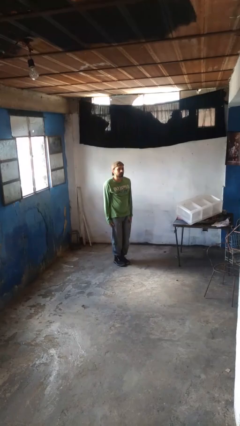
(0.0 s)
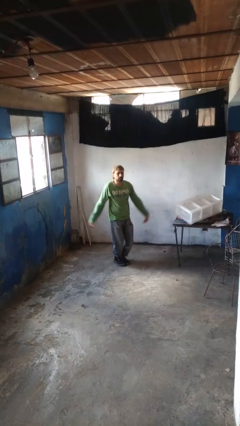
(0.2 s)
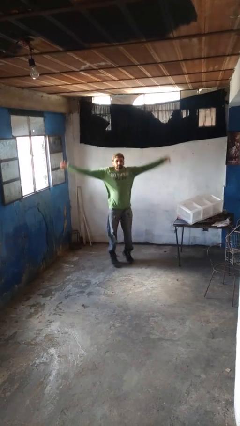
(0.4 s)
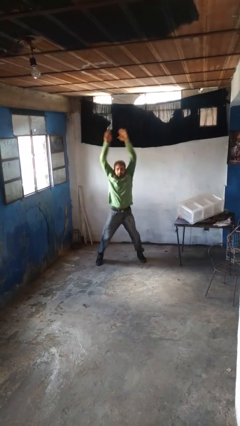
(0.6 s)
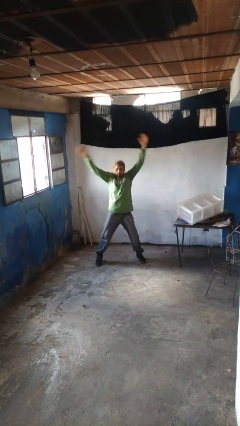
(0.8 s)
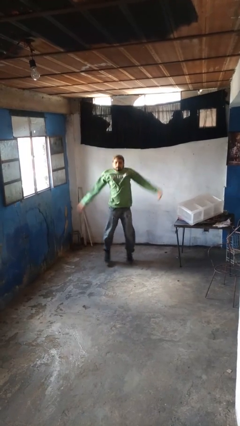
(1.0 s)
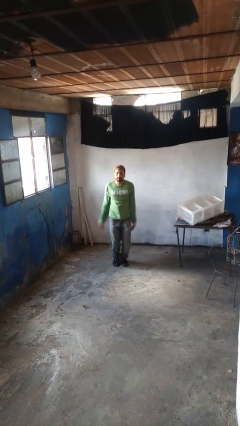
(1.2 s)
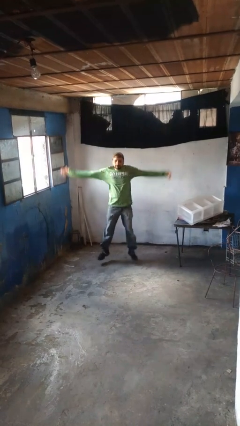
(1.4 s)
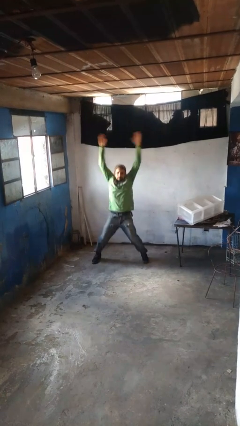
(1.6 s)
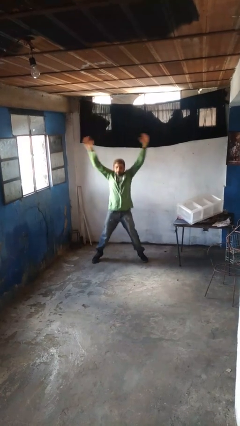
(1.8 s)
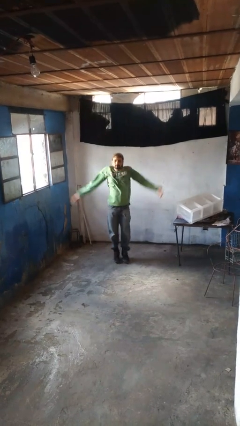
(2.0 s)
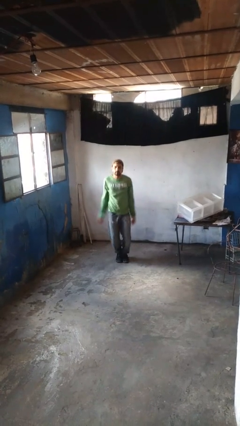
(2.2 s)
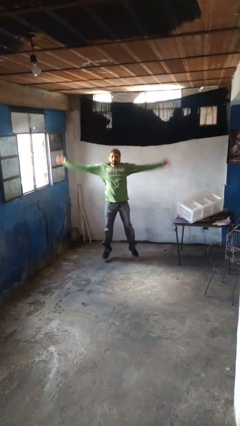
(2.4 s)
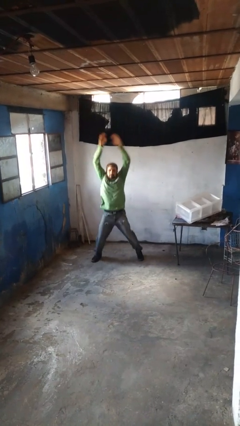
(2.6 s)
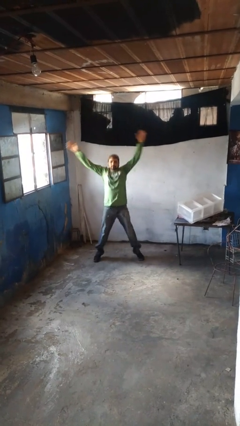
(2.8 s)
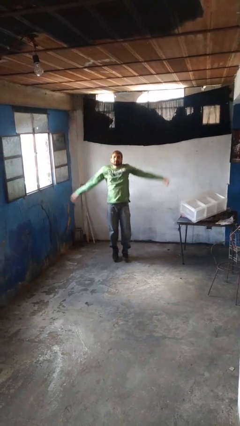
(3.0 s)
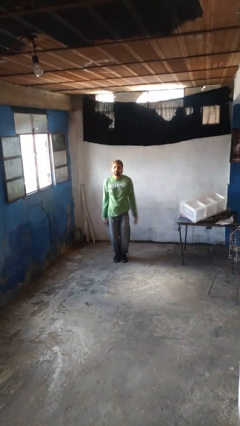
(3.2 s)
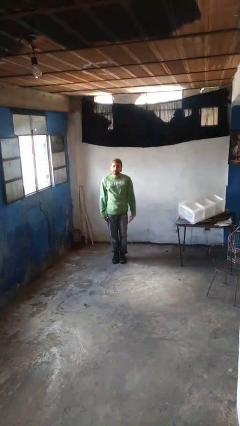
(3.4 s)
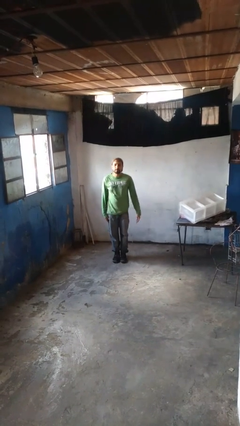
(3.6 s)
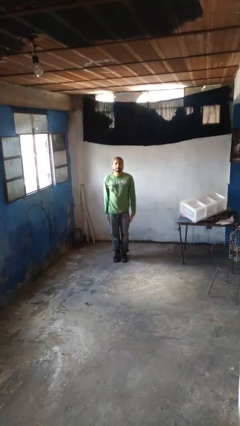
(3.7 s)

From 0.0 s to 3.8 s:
person exercises with jumping jacks

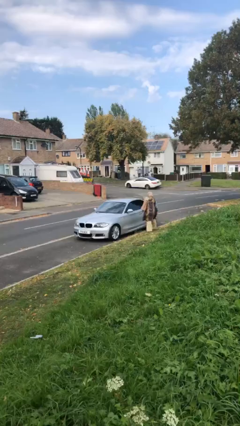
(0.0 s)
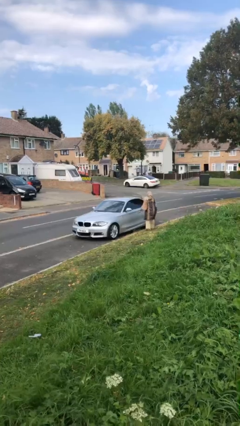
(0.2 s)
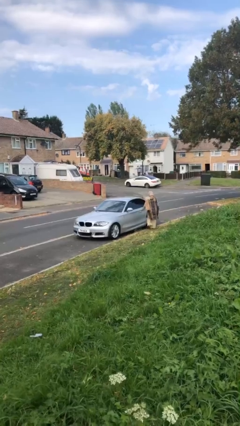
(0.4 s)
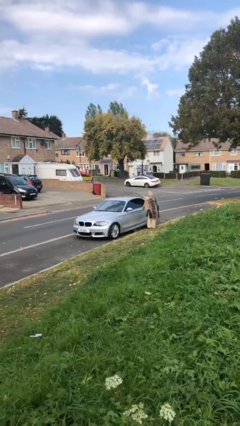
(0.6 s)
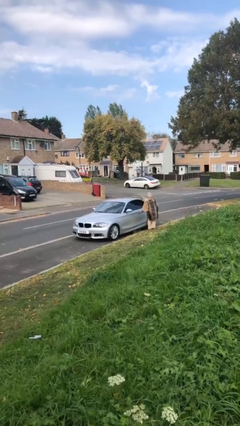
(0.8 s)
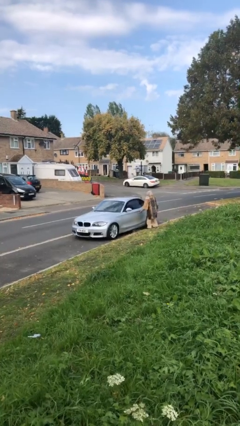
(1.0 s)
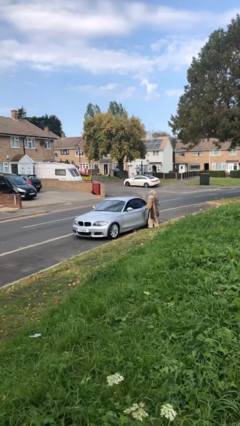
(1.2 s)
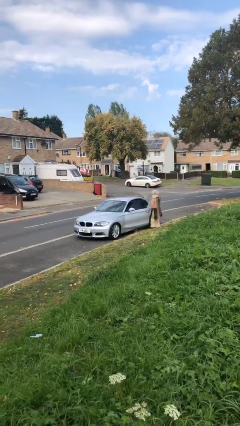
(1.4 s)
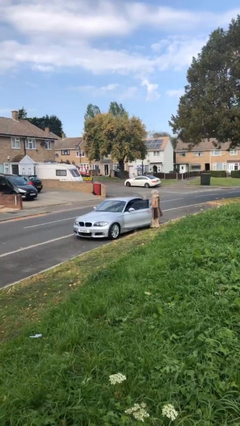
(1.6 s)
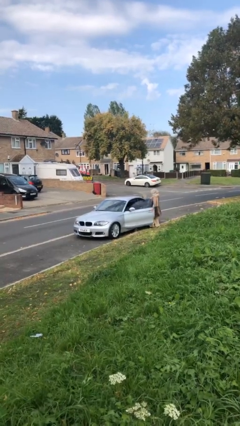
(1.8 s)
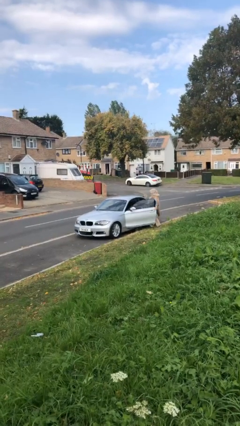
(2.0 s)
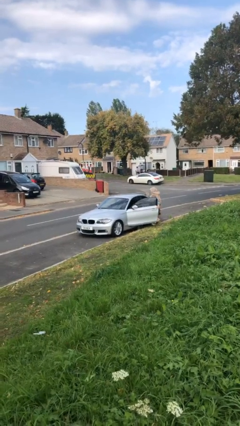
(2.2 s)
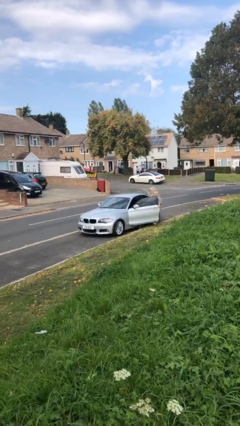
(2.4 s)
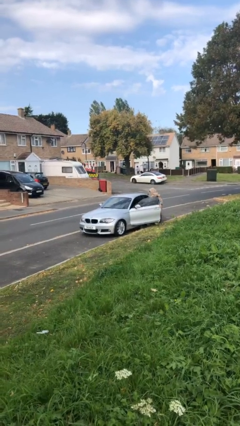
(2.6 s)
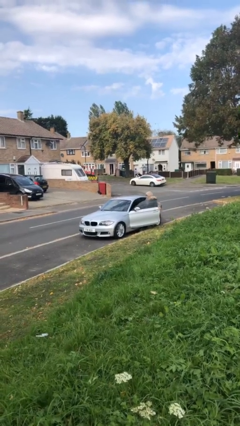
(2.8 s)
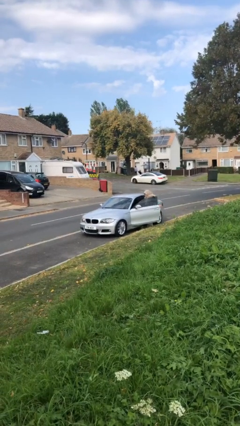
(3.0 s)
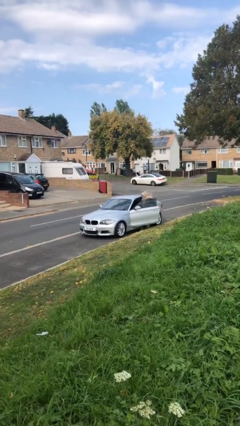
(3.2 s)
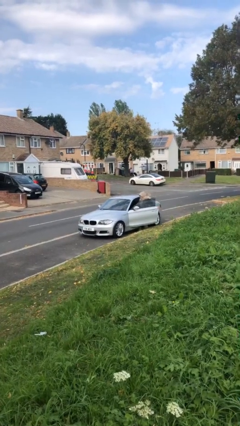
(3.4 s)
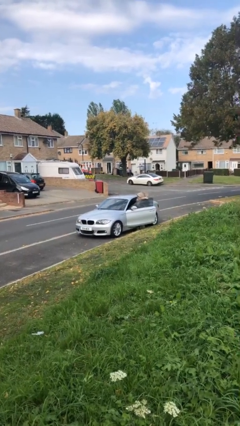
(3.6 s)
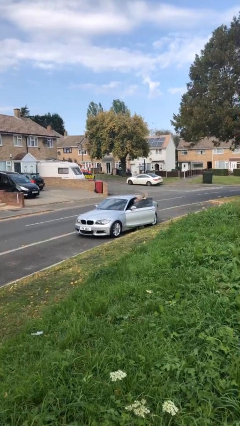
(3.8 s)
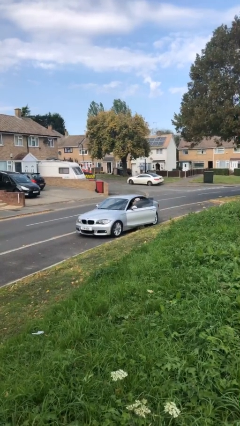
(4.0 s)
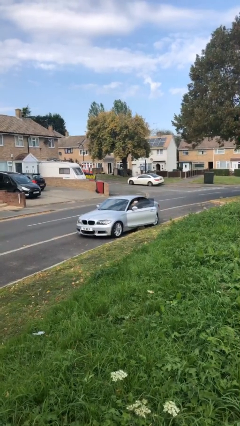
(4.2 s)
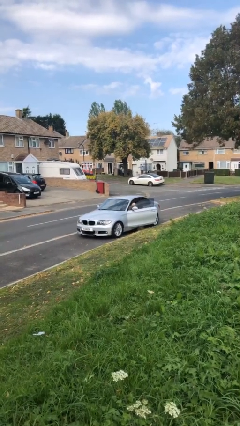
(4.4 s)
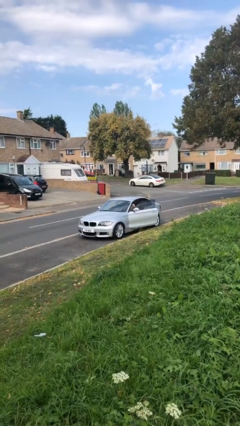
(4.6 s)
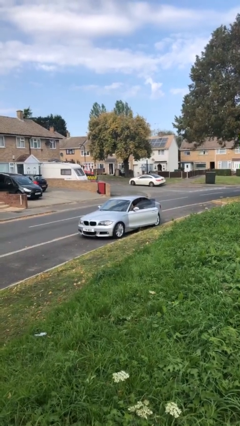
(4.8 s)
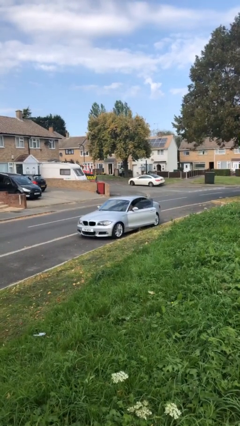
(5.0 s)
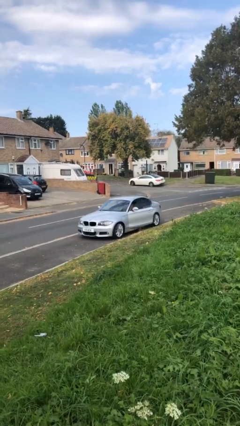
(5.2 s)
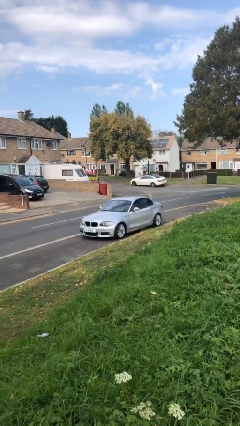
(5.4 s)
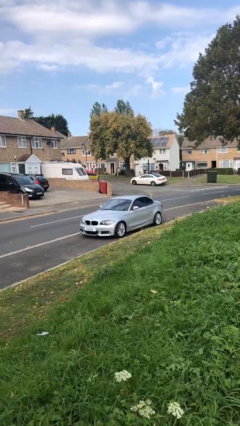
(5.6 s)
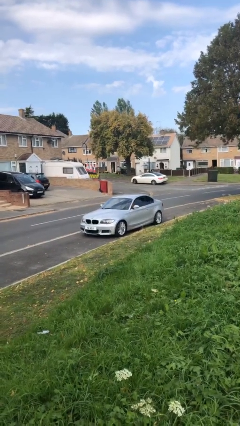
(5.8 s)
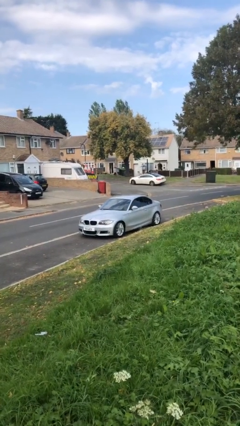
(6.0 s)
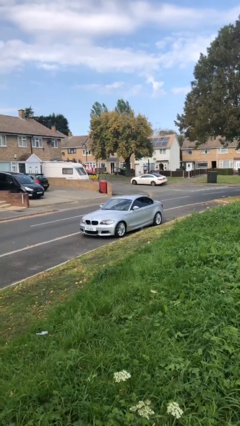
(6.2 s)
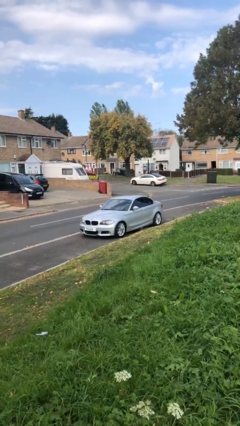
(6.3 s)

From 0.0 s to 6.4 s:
car picks up person

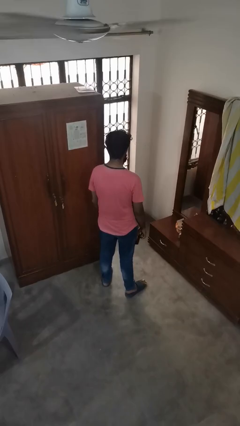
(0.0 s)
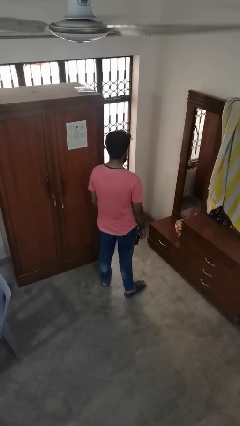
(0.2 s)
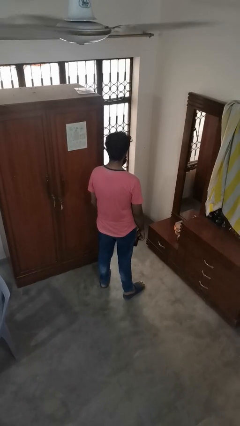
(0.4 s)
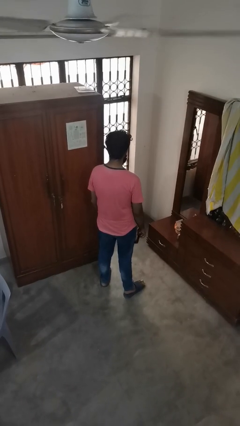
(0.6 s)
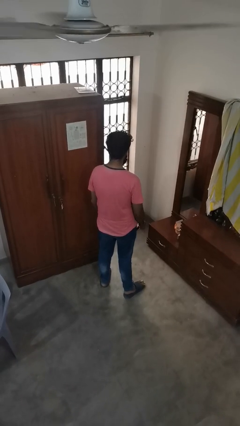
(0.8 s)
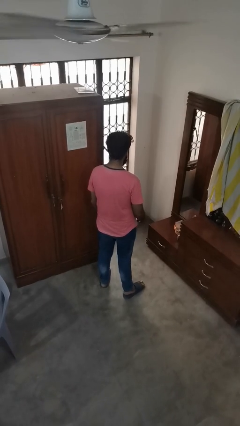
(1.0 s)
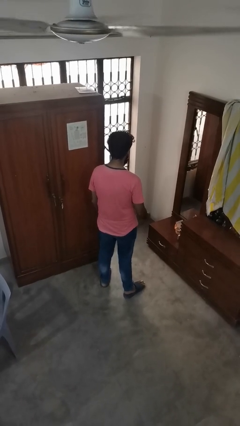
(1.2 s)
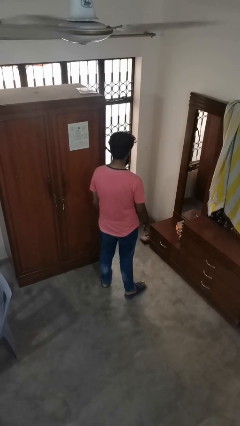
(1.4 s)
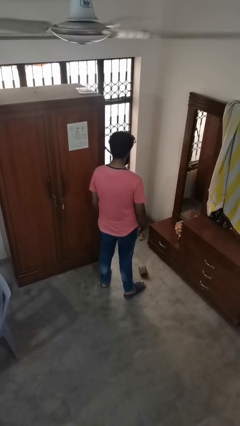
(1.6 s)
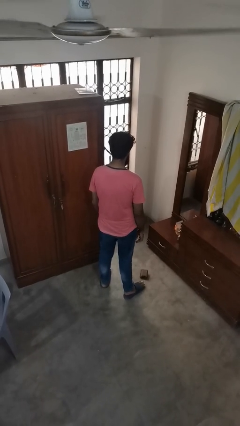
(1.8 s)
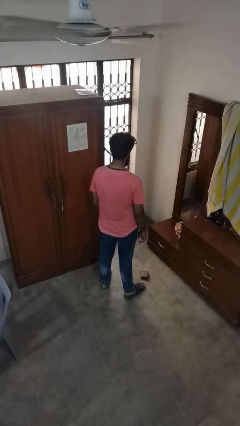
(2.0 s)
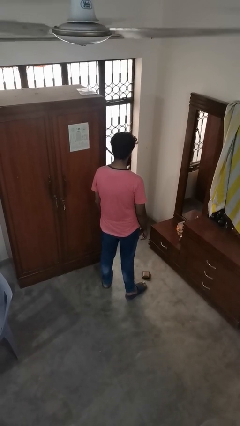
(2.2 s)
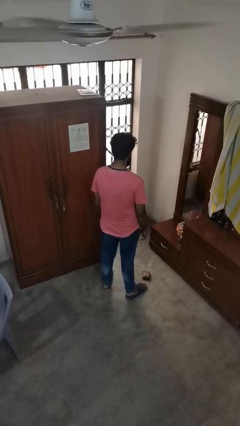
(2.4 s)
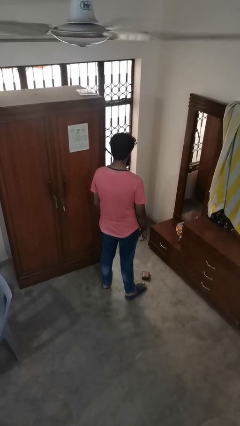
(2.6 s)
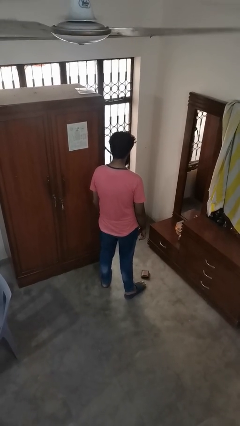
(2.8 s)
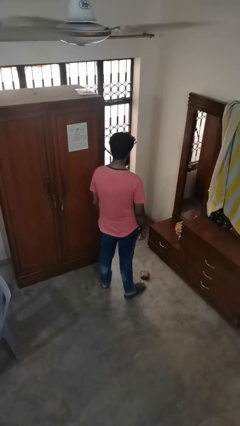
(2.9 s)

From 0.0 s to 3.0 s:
person throws object to ground

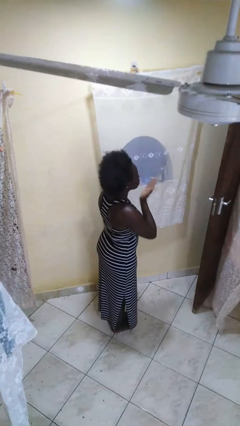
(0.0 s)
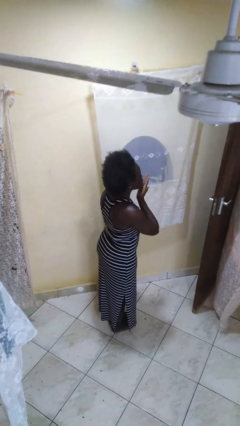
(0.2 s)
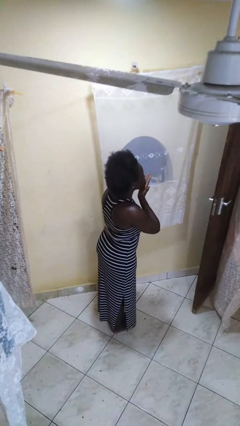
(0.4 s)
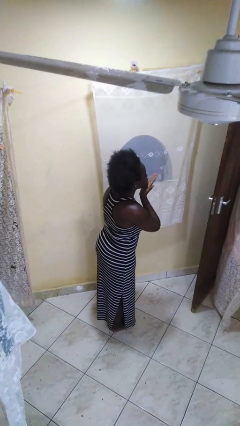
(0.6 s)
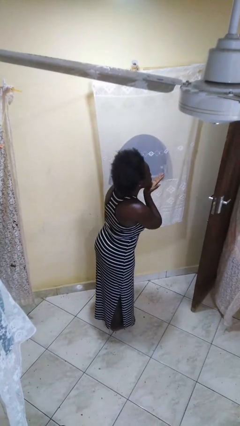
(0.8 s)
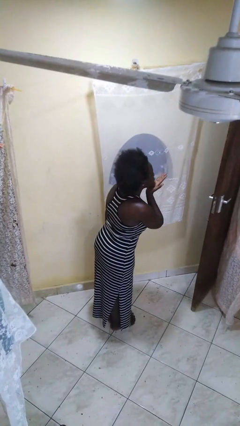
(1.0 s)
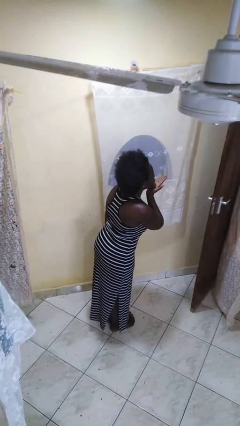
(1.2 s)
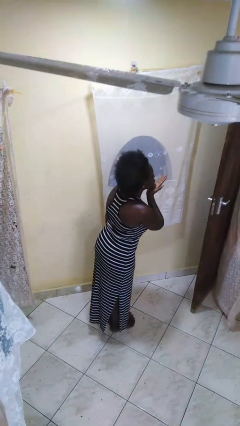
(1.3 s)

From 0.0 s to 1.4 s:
person gestures blow kiss

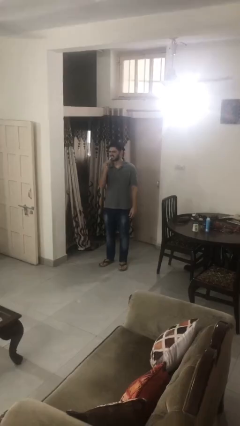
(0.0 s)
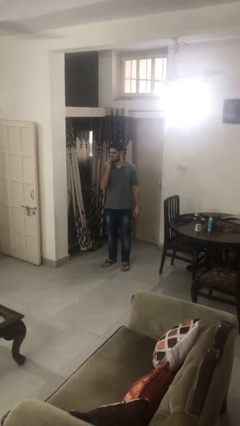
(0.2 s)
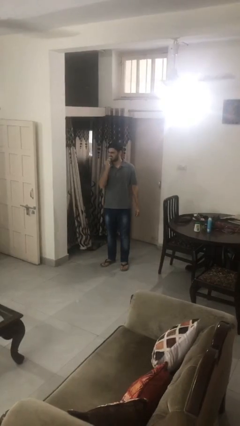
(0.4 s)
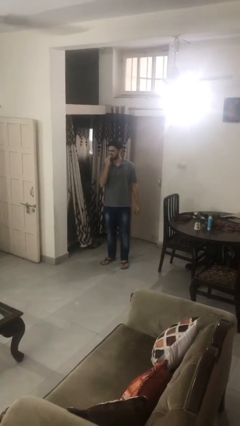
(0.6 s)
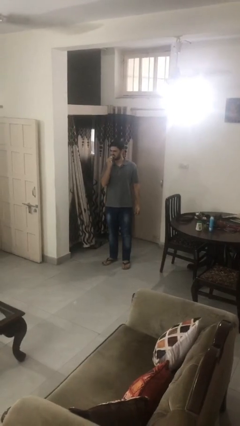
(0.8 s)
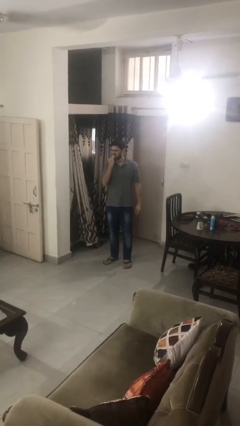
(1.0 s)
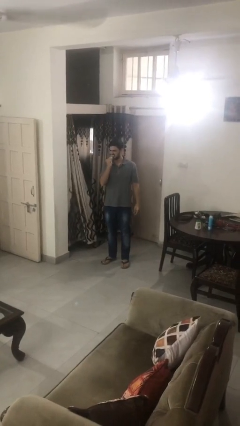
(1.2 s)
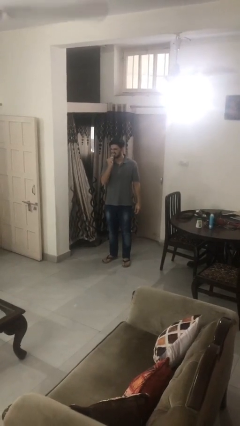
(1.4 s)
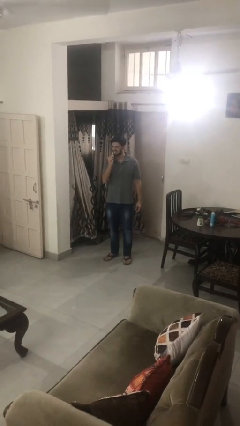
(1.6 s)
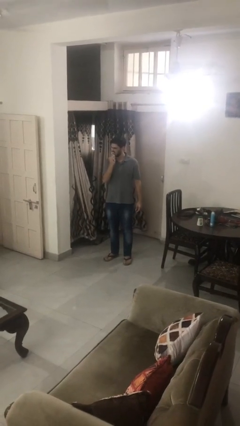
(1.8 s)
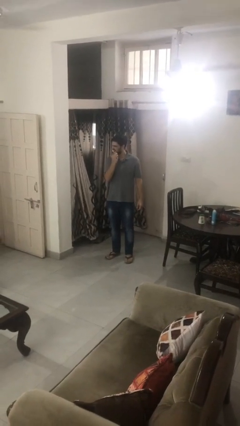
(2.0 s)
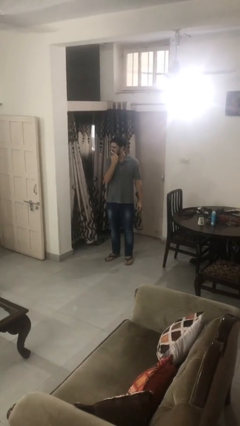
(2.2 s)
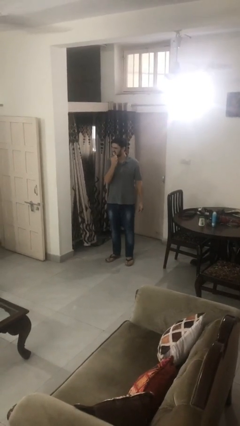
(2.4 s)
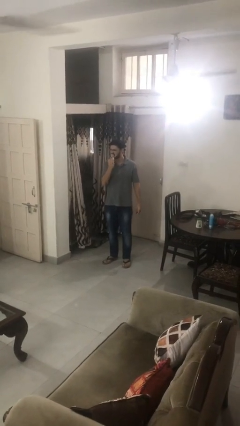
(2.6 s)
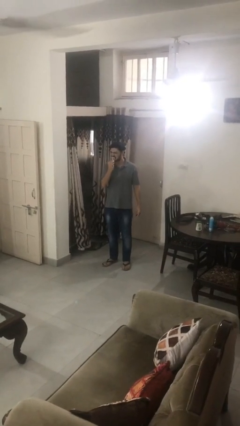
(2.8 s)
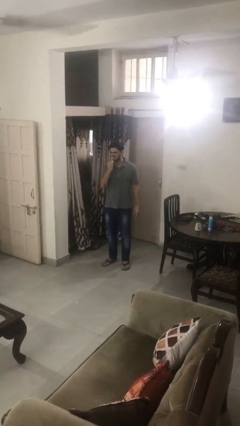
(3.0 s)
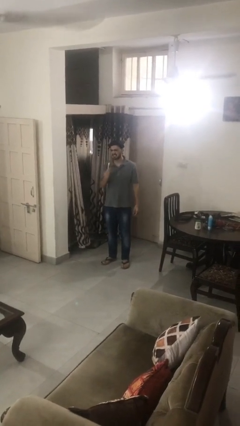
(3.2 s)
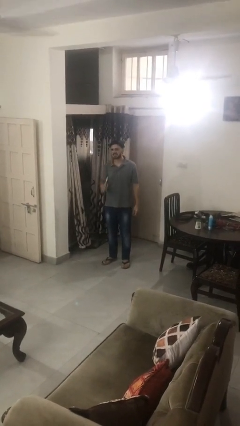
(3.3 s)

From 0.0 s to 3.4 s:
person brushes teeth
